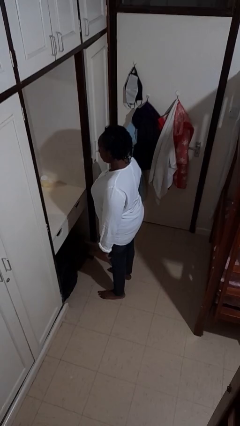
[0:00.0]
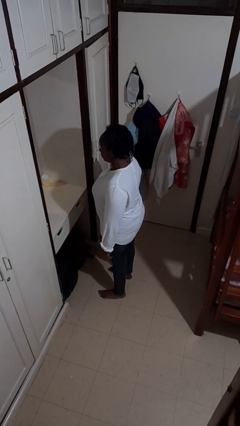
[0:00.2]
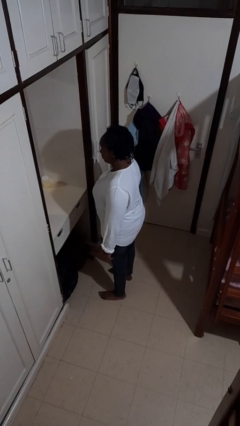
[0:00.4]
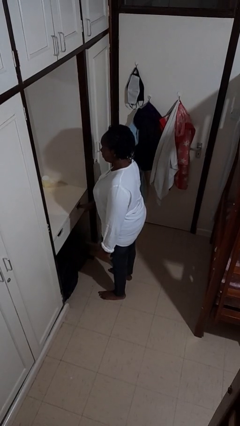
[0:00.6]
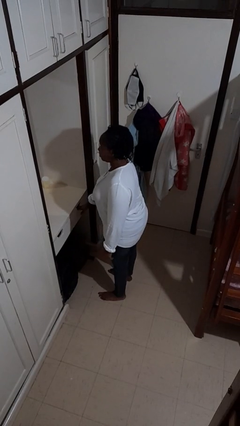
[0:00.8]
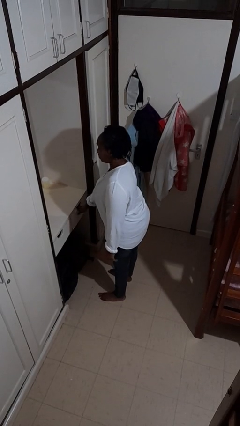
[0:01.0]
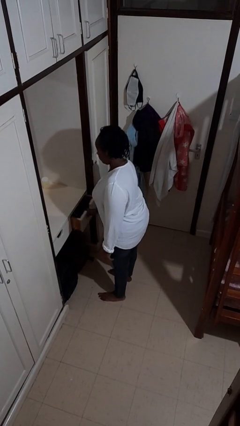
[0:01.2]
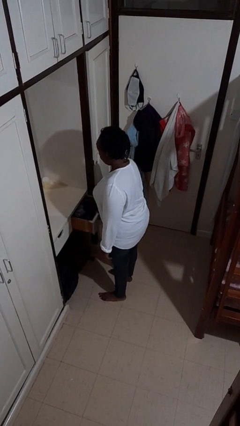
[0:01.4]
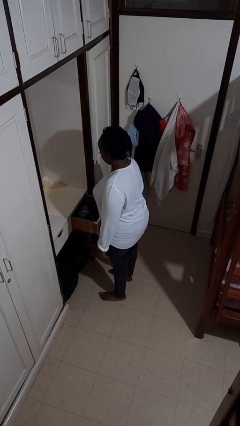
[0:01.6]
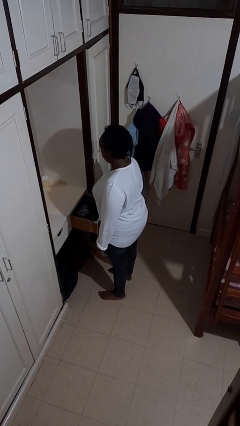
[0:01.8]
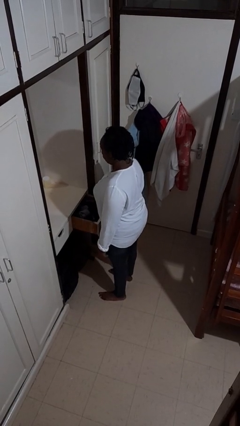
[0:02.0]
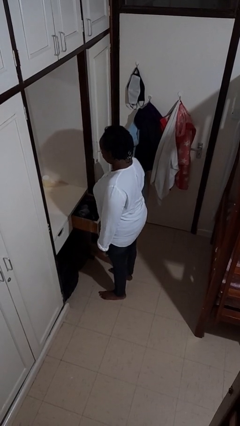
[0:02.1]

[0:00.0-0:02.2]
person opens dresser drawer

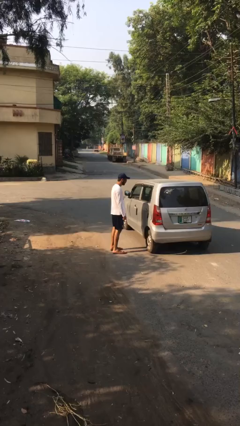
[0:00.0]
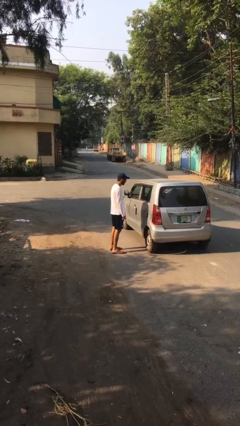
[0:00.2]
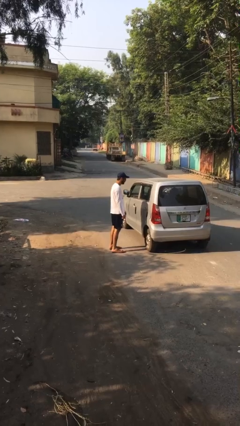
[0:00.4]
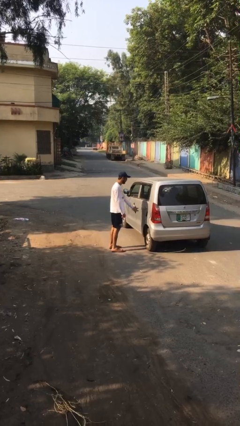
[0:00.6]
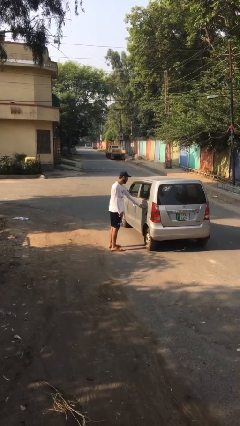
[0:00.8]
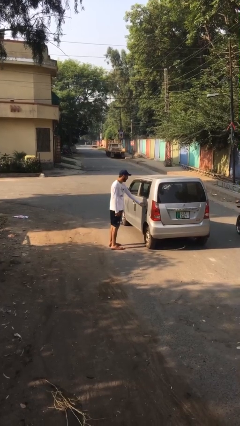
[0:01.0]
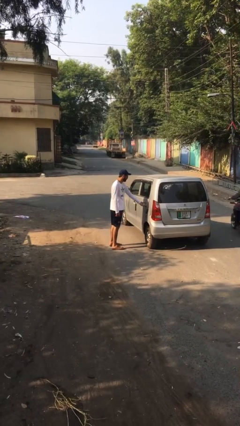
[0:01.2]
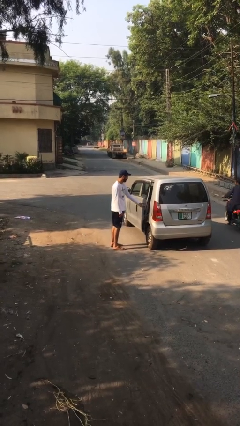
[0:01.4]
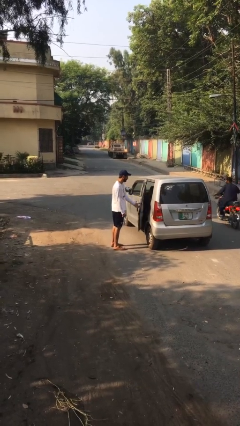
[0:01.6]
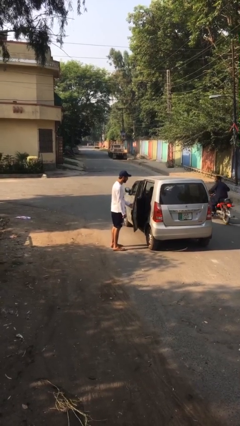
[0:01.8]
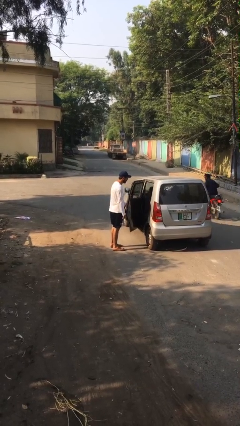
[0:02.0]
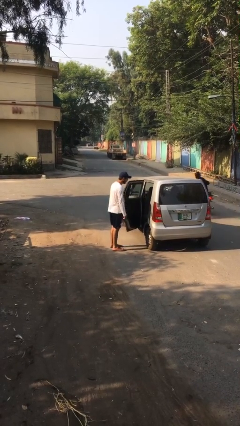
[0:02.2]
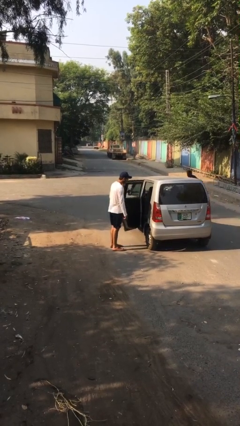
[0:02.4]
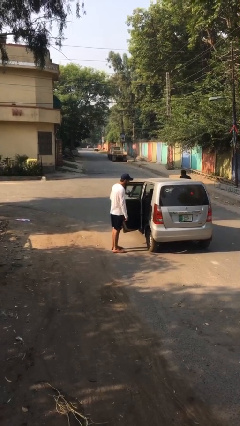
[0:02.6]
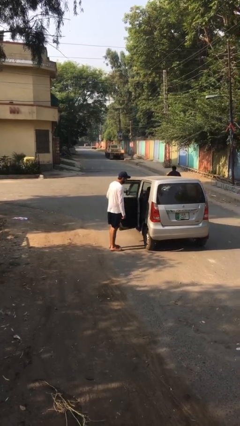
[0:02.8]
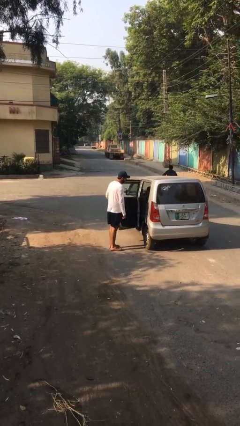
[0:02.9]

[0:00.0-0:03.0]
person opens car door

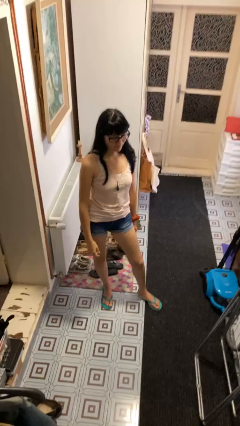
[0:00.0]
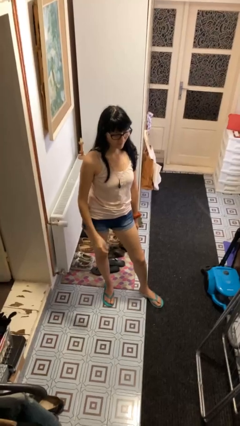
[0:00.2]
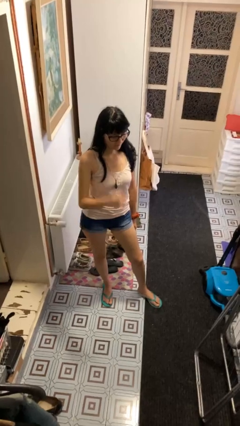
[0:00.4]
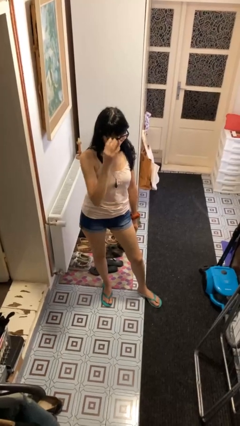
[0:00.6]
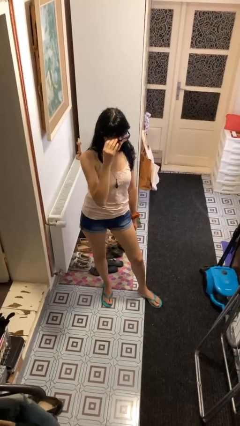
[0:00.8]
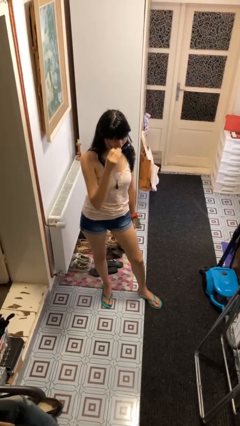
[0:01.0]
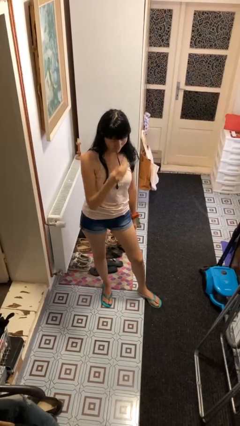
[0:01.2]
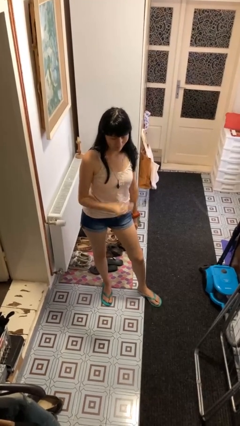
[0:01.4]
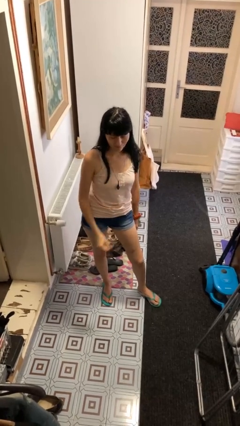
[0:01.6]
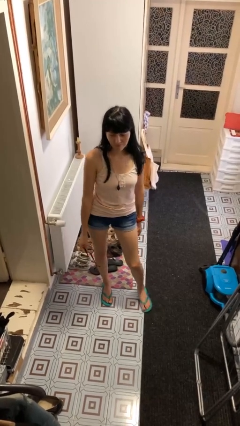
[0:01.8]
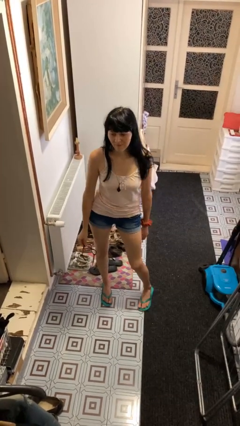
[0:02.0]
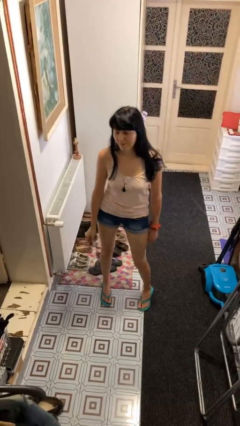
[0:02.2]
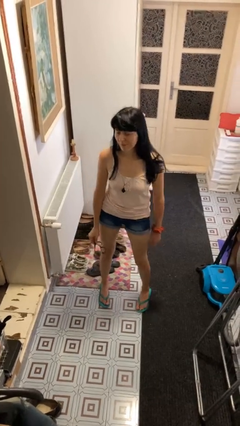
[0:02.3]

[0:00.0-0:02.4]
person takes off glasses

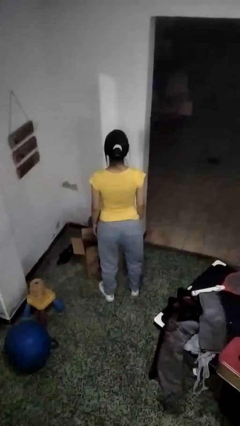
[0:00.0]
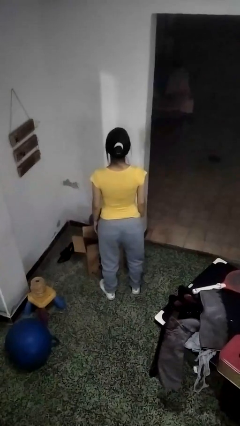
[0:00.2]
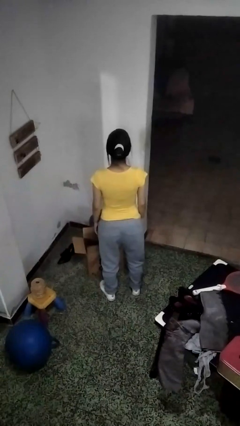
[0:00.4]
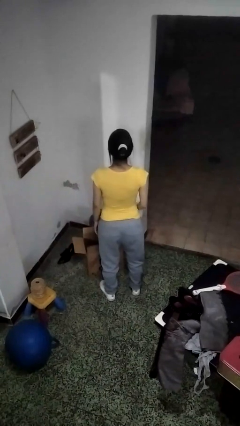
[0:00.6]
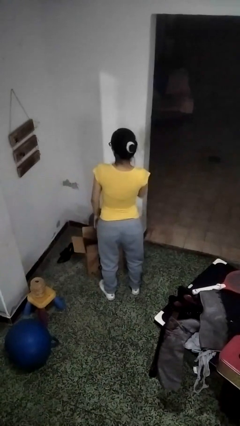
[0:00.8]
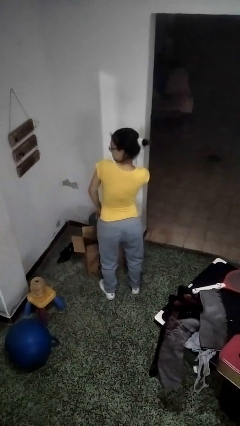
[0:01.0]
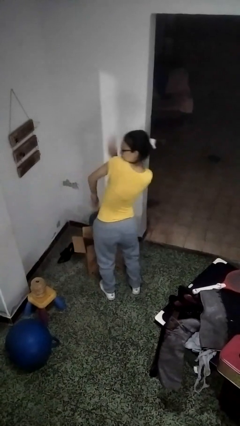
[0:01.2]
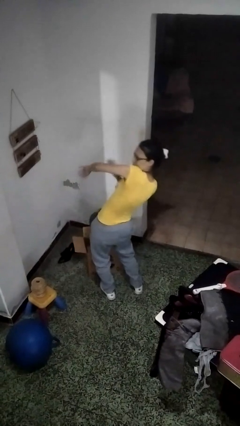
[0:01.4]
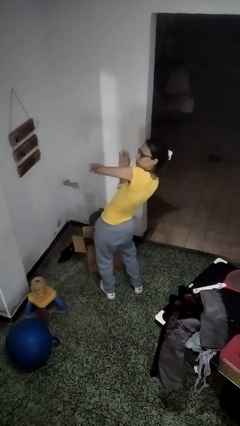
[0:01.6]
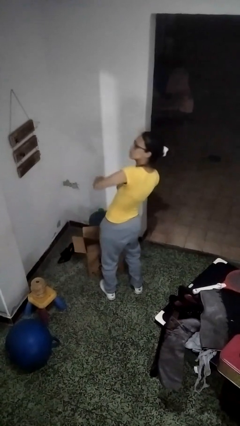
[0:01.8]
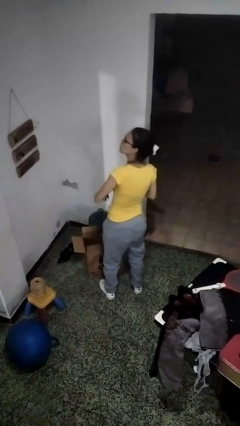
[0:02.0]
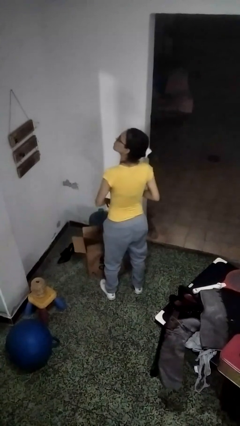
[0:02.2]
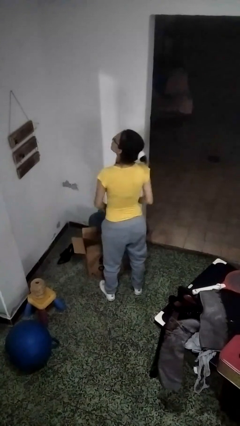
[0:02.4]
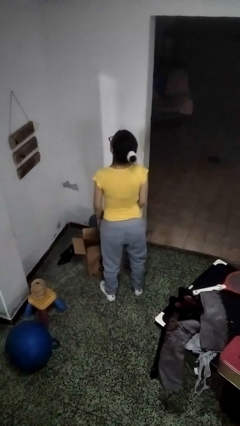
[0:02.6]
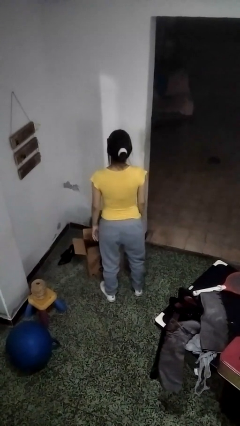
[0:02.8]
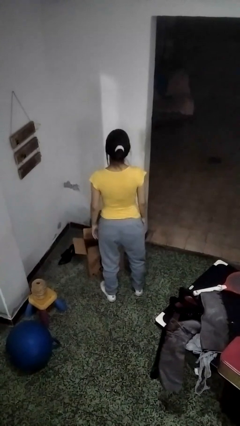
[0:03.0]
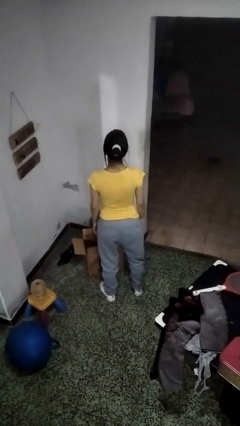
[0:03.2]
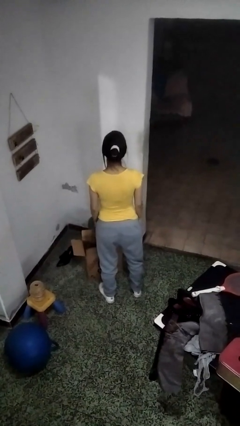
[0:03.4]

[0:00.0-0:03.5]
person swats bug

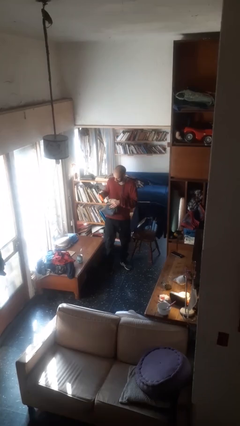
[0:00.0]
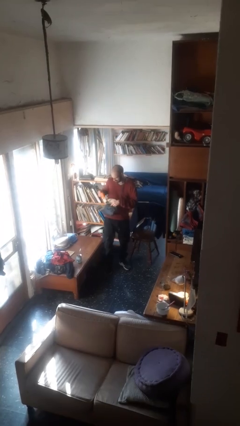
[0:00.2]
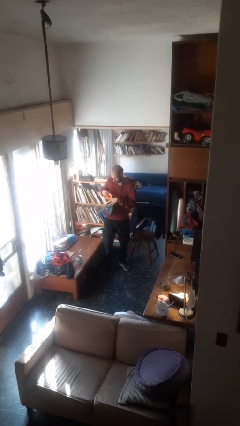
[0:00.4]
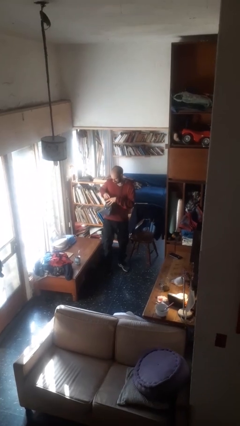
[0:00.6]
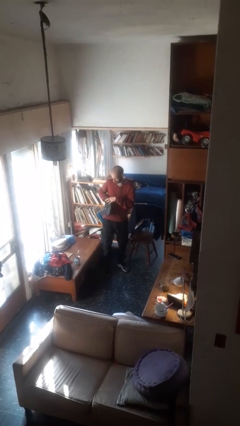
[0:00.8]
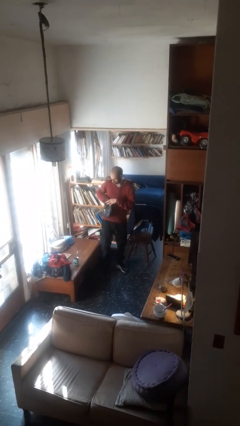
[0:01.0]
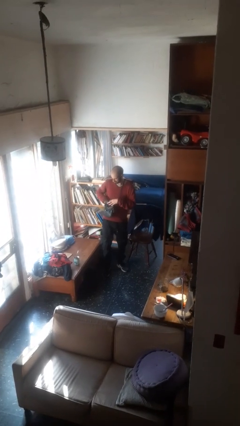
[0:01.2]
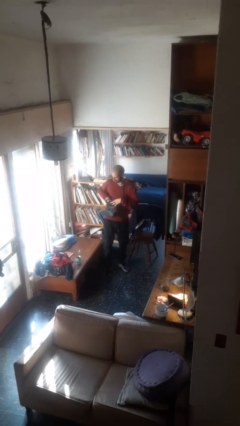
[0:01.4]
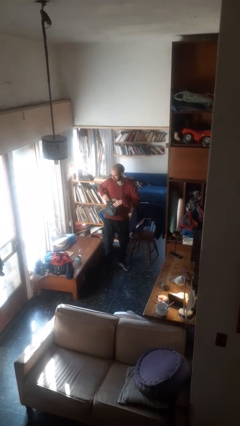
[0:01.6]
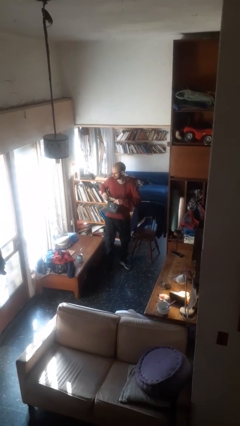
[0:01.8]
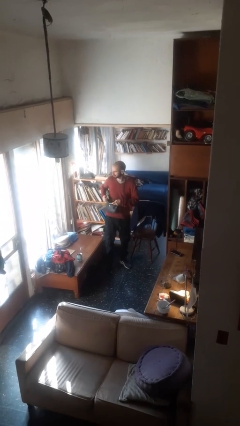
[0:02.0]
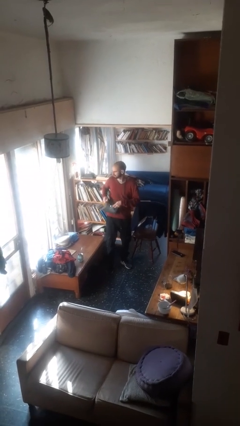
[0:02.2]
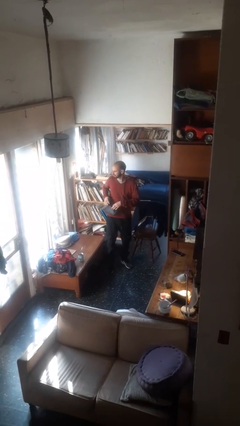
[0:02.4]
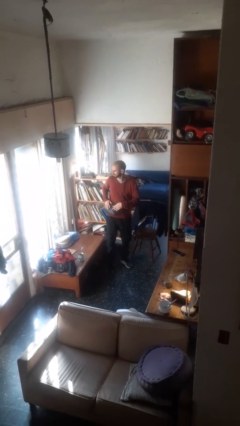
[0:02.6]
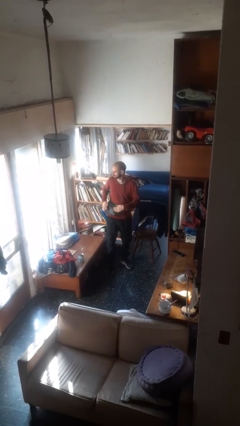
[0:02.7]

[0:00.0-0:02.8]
person puts object into purse

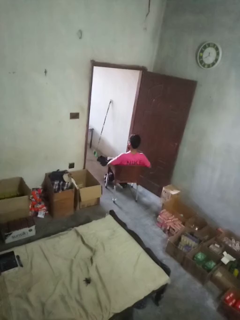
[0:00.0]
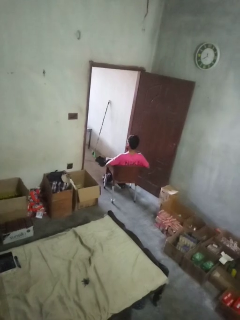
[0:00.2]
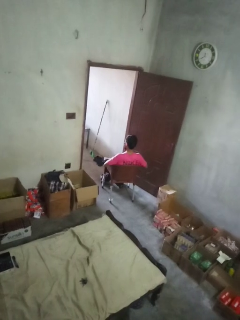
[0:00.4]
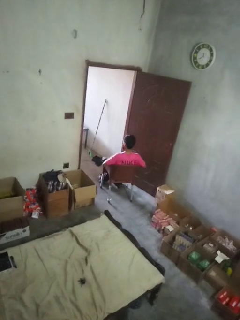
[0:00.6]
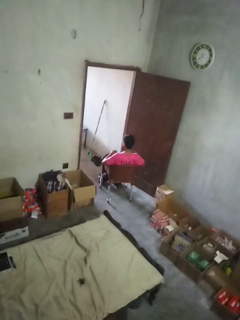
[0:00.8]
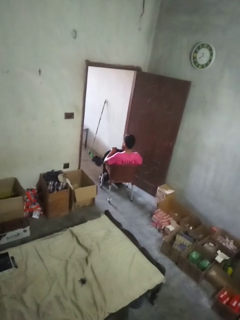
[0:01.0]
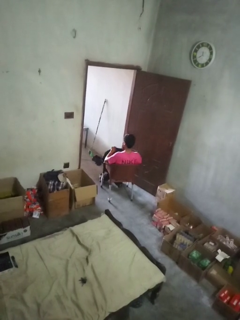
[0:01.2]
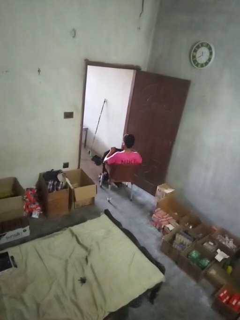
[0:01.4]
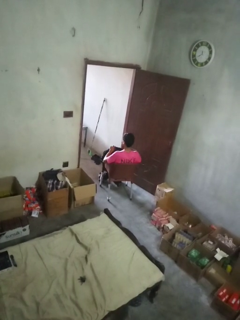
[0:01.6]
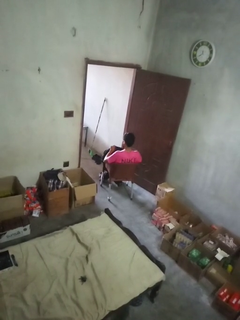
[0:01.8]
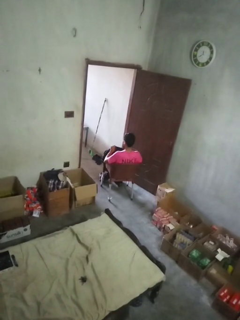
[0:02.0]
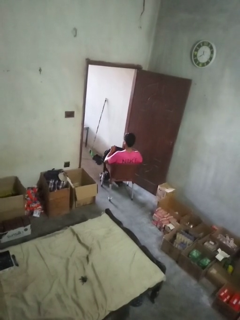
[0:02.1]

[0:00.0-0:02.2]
person searches in backpack

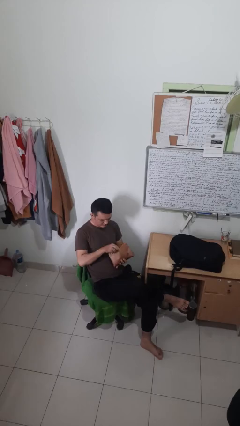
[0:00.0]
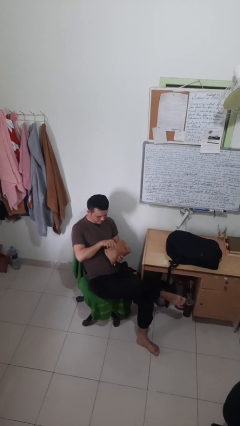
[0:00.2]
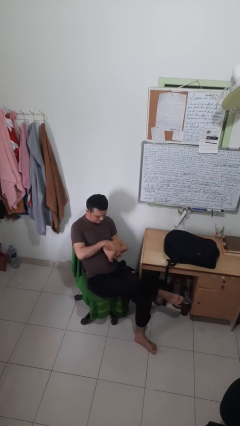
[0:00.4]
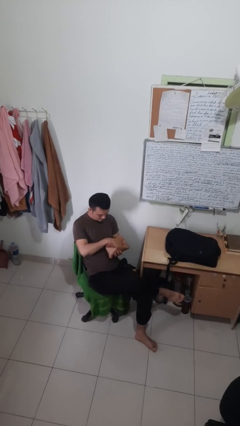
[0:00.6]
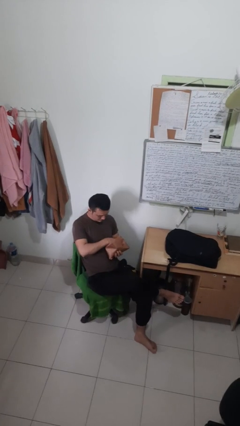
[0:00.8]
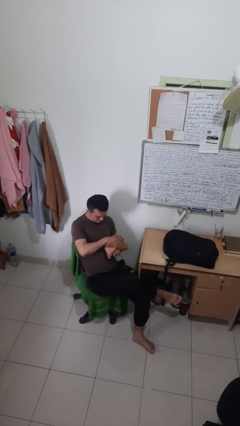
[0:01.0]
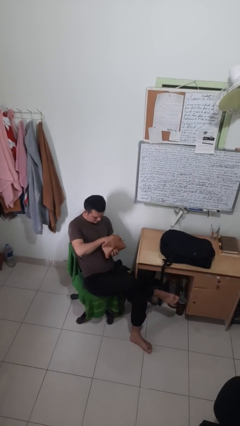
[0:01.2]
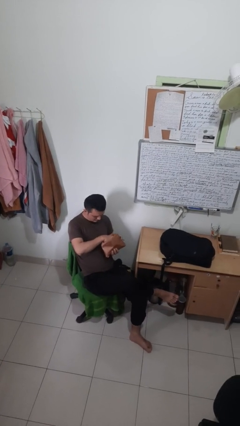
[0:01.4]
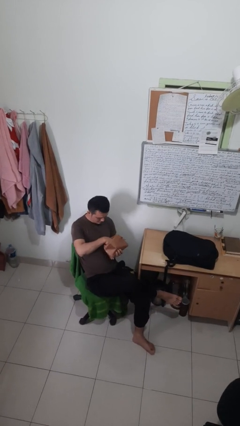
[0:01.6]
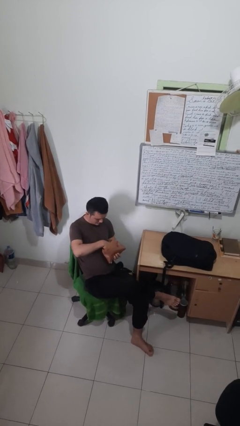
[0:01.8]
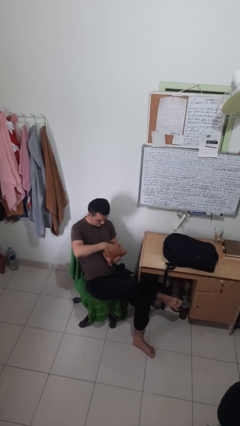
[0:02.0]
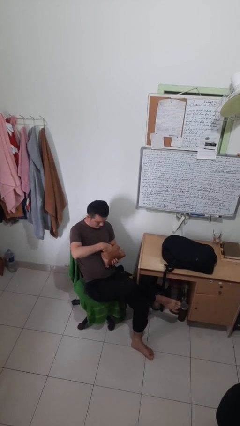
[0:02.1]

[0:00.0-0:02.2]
person searches in purse
